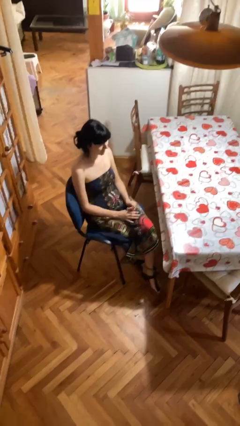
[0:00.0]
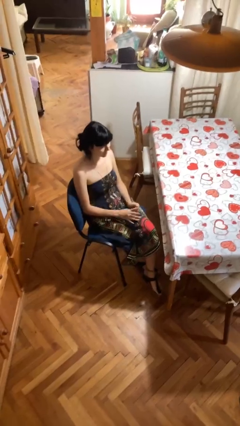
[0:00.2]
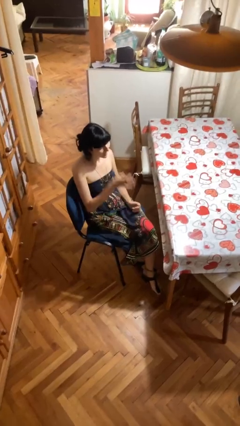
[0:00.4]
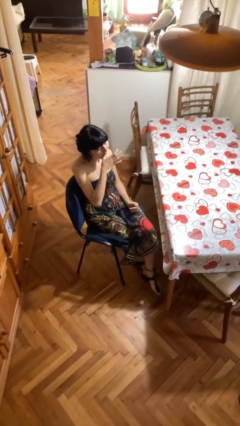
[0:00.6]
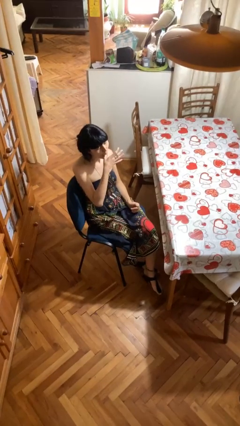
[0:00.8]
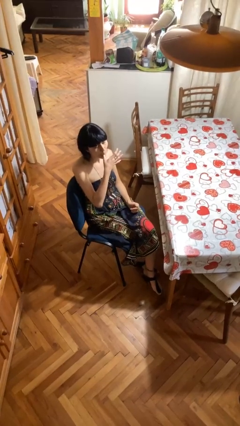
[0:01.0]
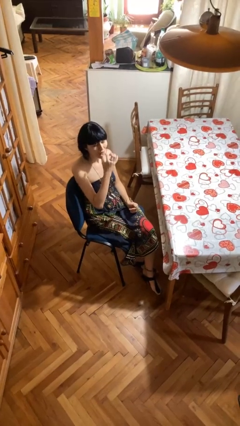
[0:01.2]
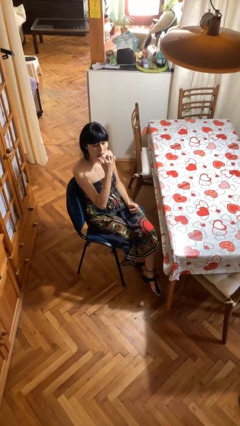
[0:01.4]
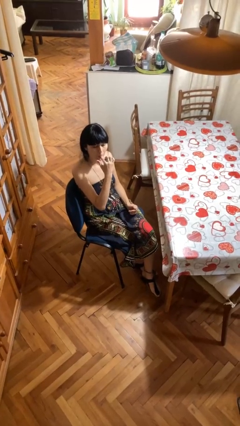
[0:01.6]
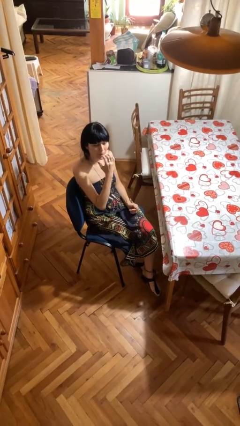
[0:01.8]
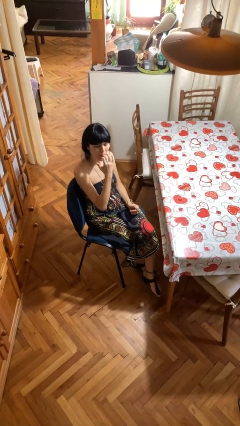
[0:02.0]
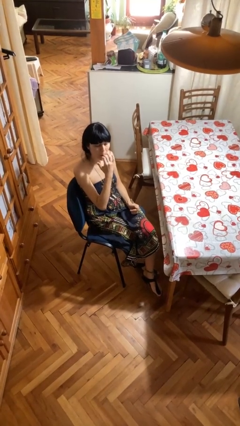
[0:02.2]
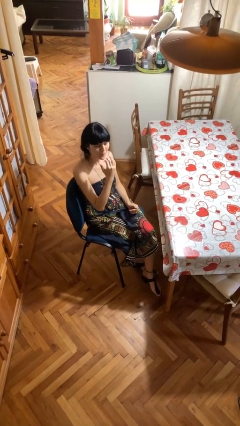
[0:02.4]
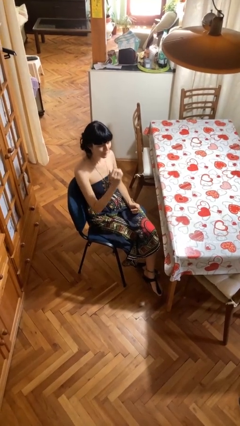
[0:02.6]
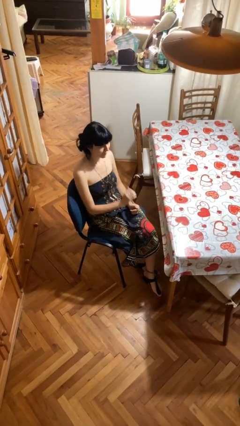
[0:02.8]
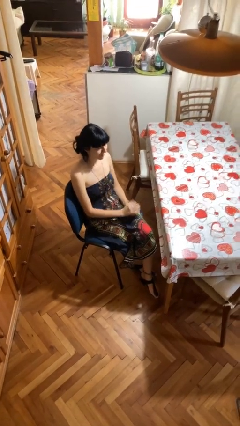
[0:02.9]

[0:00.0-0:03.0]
person licks fingers

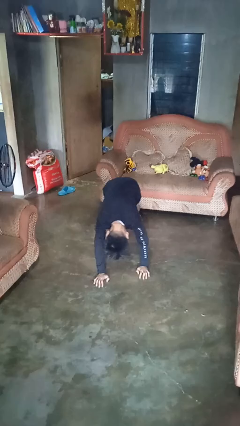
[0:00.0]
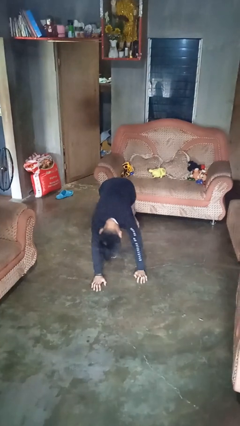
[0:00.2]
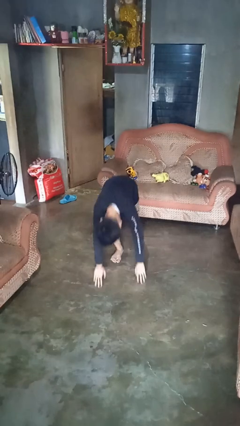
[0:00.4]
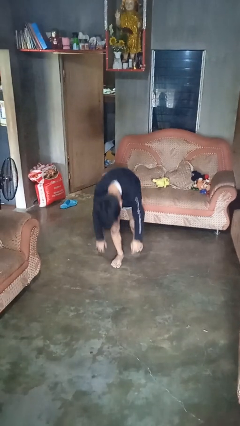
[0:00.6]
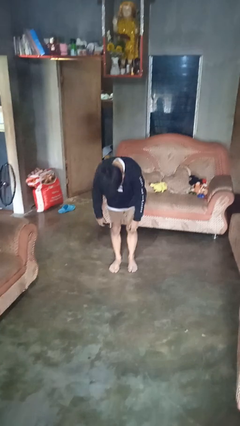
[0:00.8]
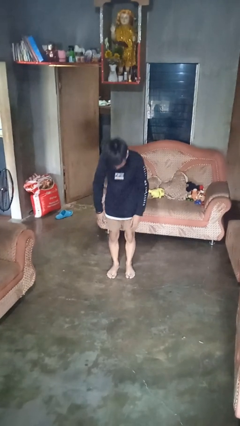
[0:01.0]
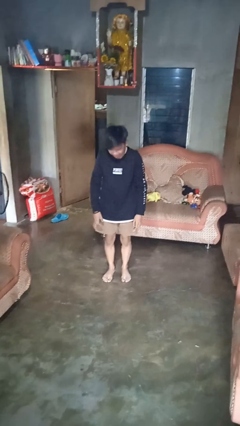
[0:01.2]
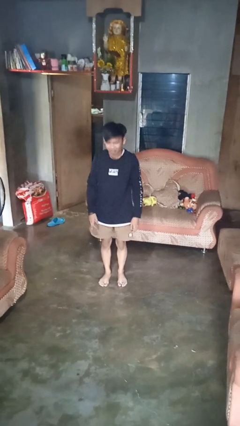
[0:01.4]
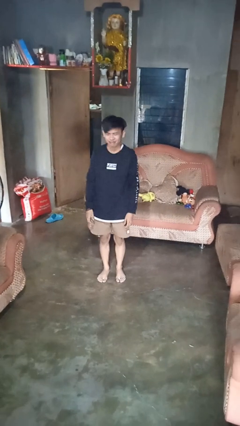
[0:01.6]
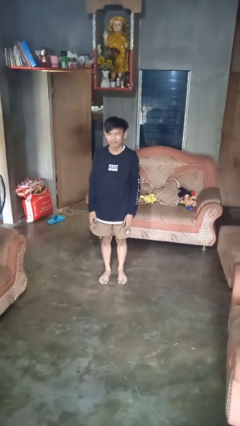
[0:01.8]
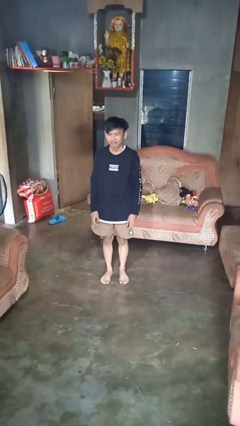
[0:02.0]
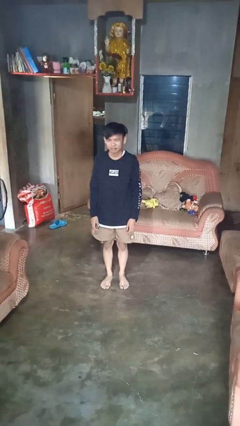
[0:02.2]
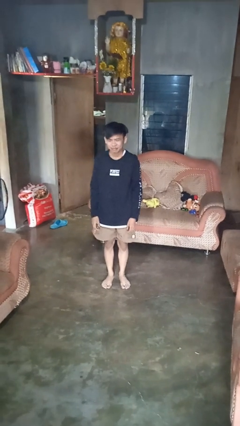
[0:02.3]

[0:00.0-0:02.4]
person stands up from floor

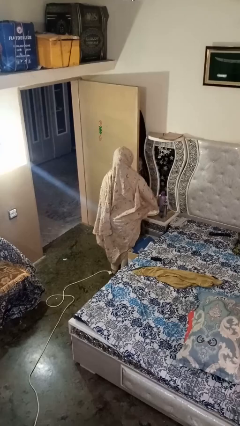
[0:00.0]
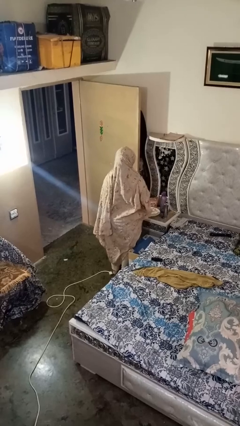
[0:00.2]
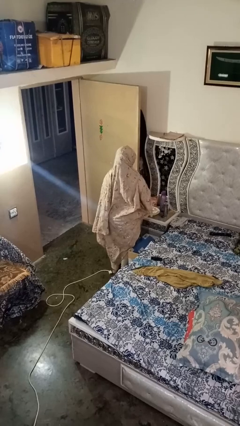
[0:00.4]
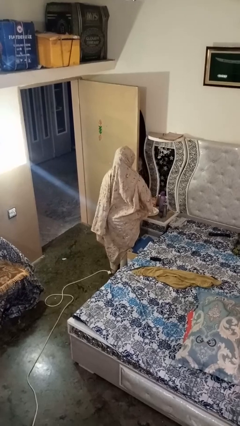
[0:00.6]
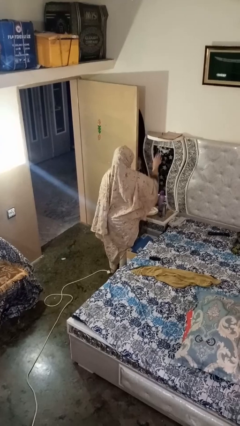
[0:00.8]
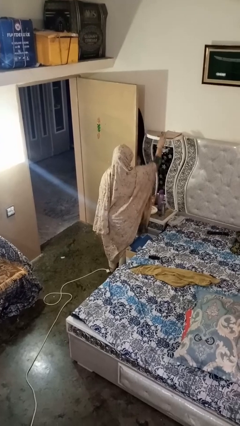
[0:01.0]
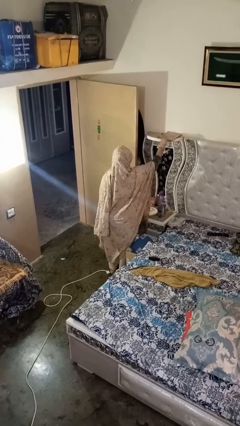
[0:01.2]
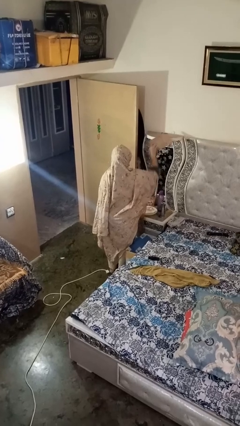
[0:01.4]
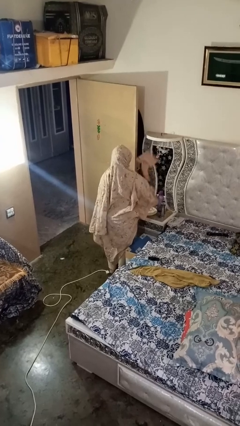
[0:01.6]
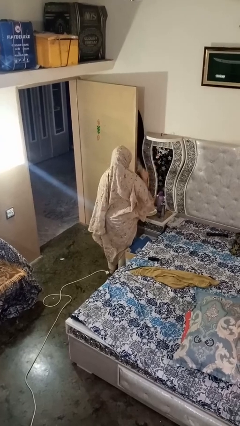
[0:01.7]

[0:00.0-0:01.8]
person picks up object from shelf

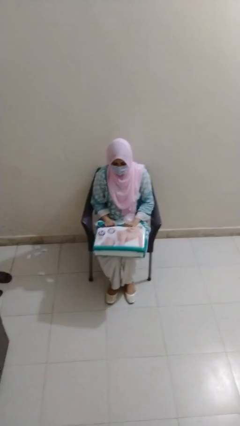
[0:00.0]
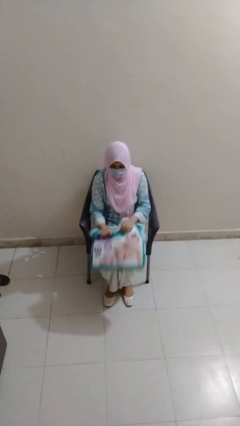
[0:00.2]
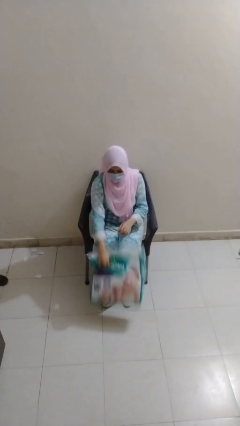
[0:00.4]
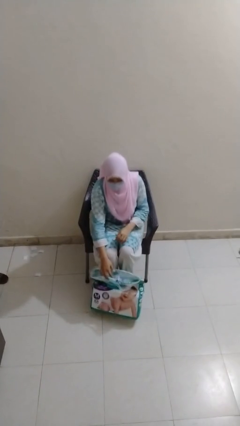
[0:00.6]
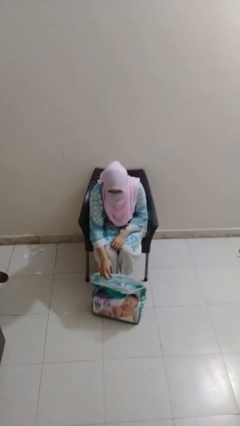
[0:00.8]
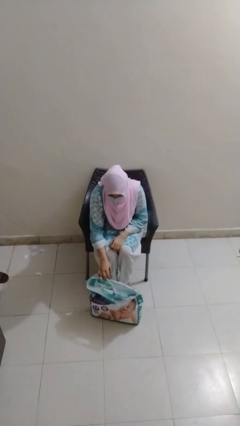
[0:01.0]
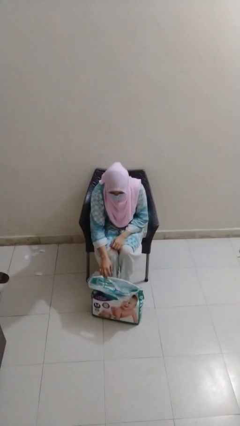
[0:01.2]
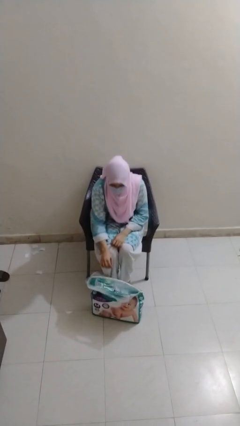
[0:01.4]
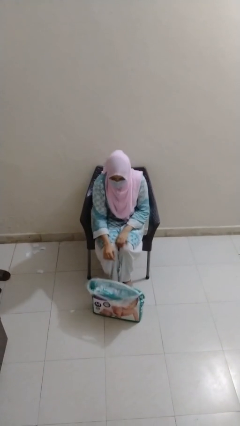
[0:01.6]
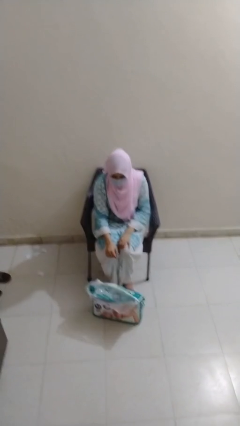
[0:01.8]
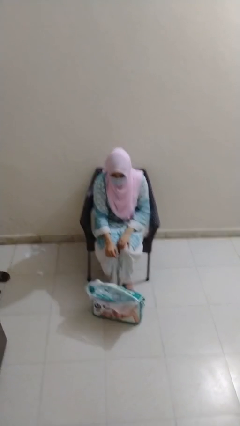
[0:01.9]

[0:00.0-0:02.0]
person drops object

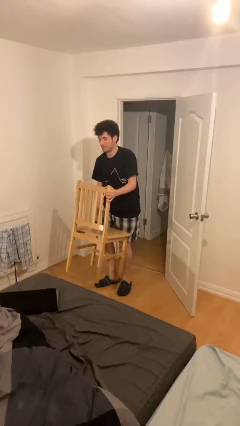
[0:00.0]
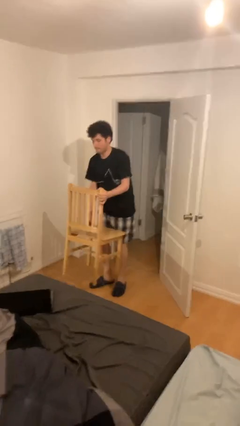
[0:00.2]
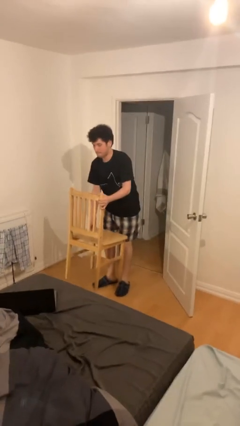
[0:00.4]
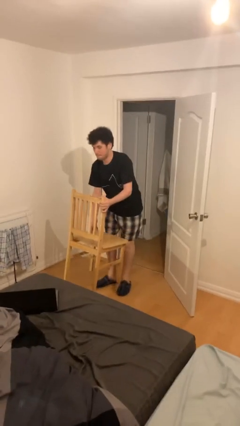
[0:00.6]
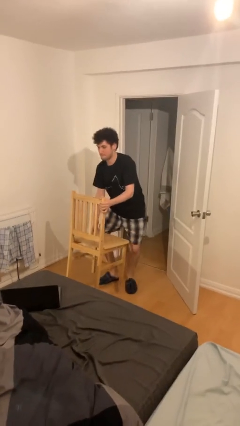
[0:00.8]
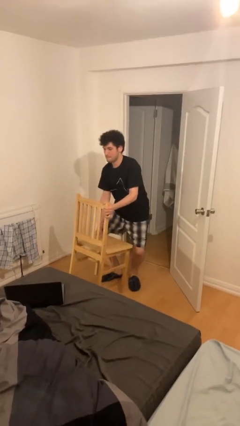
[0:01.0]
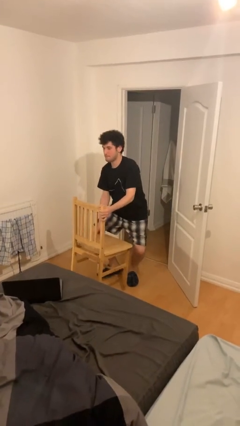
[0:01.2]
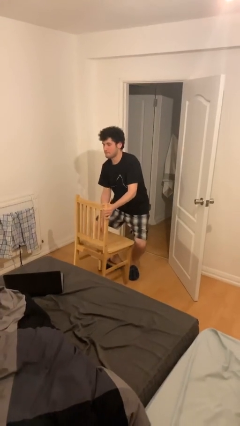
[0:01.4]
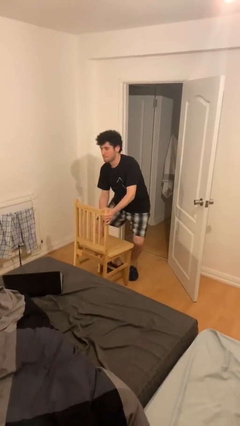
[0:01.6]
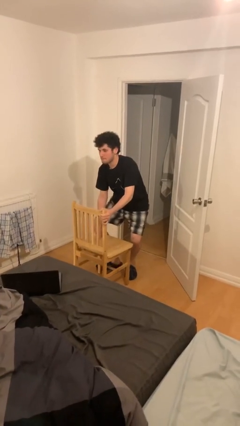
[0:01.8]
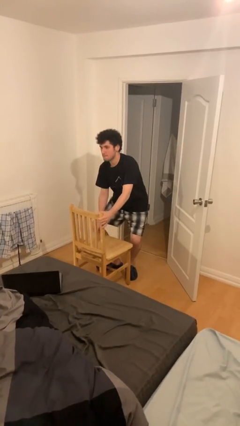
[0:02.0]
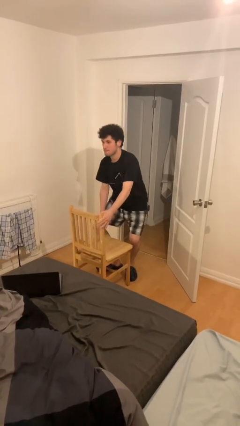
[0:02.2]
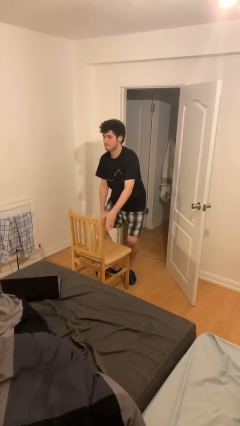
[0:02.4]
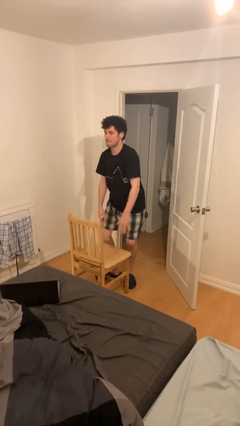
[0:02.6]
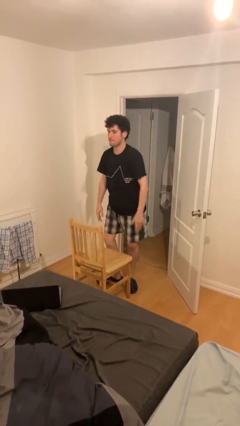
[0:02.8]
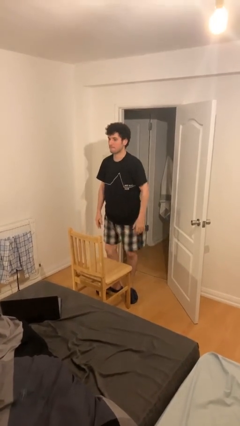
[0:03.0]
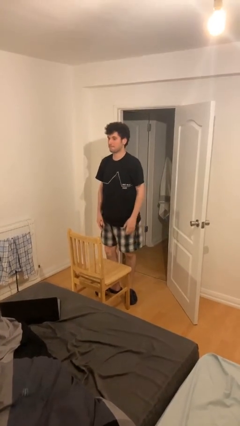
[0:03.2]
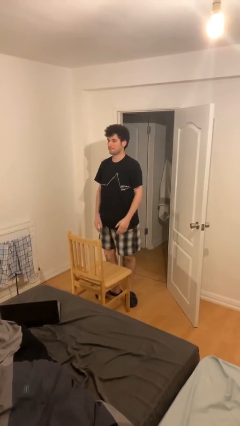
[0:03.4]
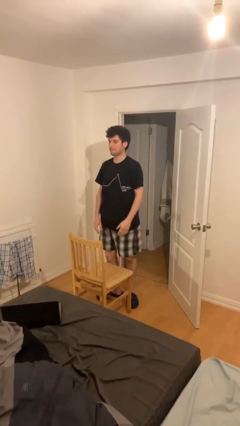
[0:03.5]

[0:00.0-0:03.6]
person puts down object on floor

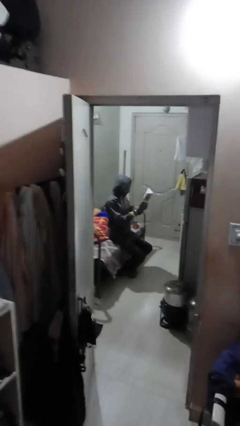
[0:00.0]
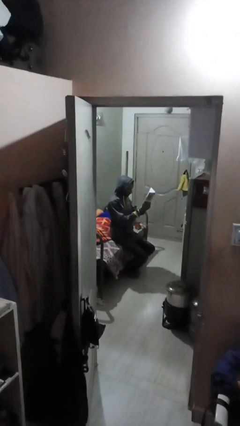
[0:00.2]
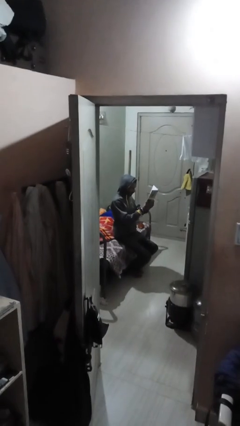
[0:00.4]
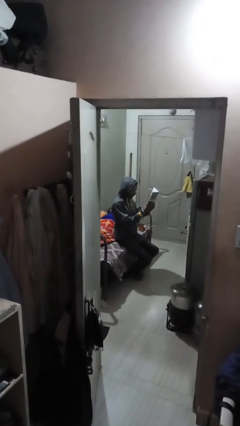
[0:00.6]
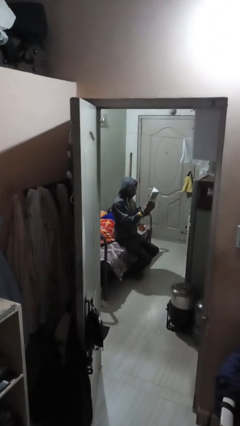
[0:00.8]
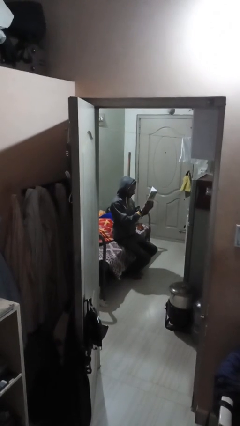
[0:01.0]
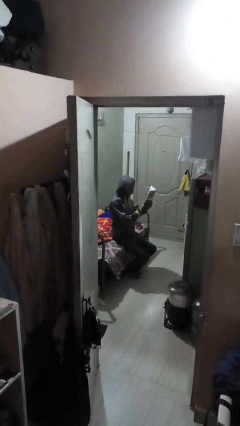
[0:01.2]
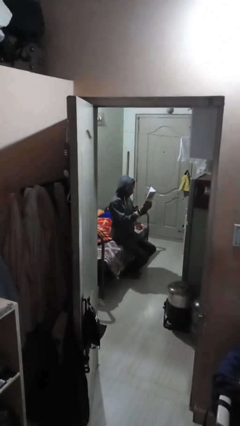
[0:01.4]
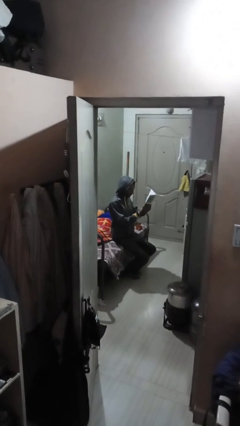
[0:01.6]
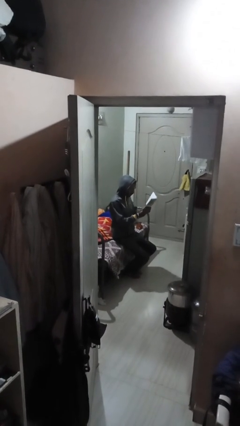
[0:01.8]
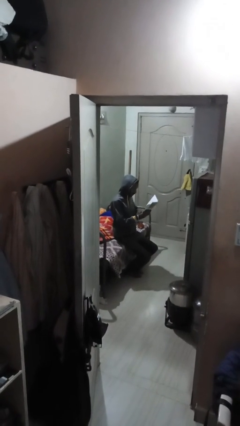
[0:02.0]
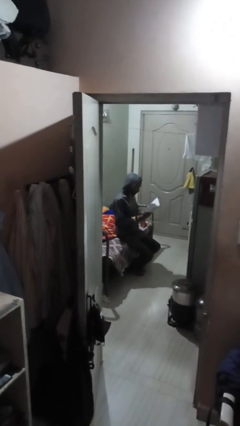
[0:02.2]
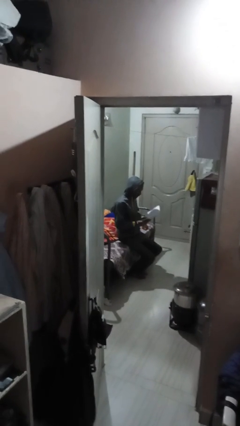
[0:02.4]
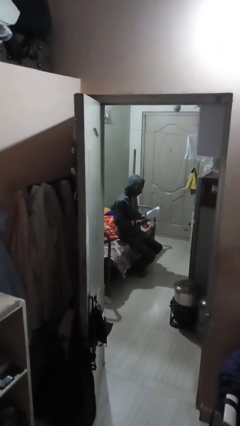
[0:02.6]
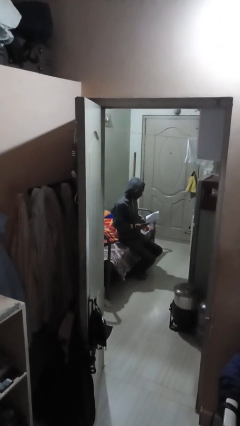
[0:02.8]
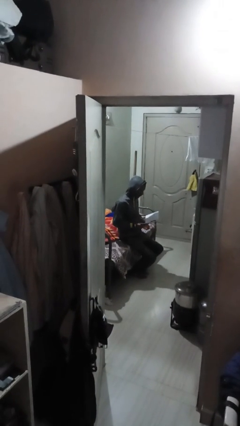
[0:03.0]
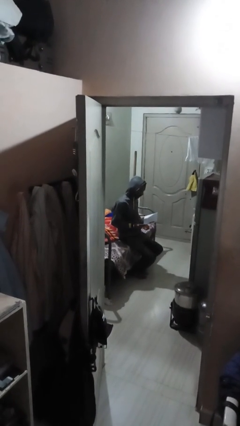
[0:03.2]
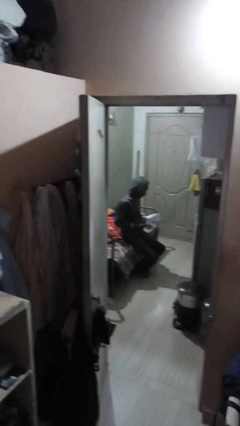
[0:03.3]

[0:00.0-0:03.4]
person reads document

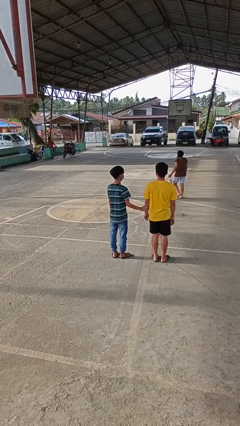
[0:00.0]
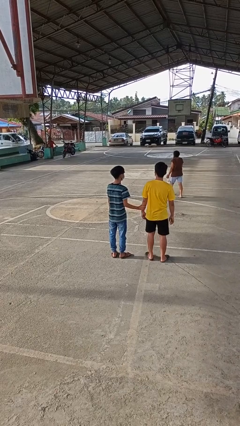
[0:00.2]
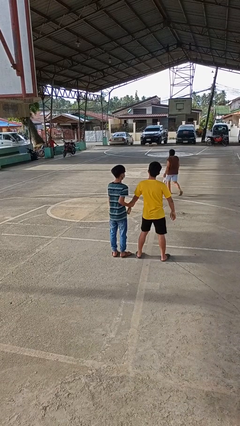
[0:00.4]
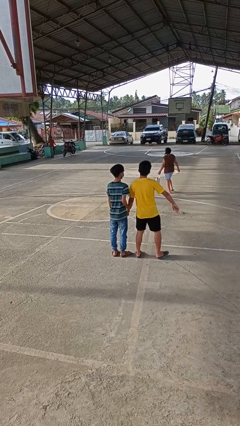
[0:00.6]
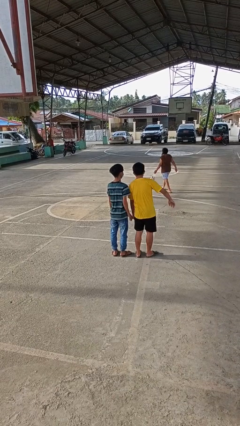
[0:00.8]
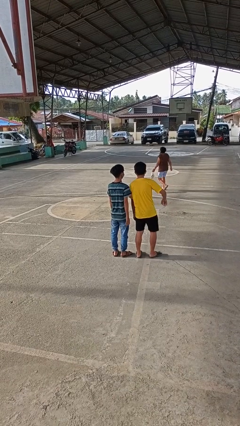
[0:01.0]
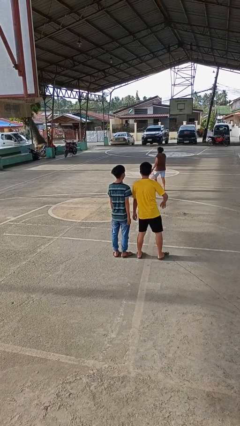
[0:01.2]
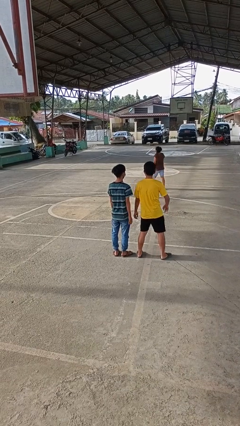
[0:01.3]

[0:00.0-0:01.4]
person grabs person by forearm
